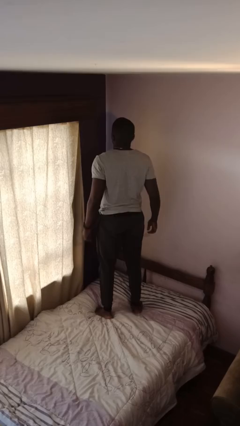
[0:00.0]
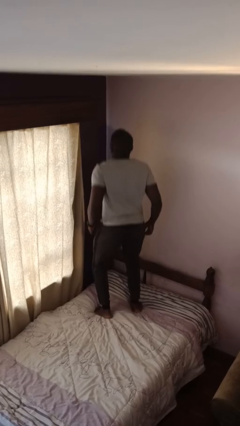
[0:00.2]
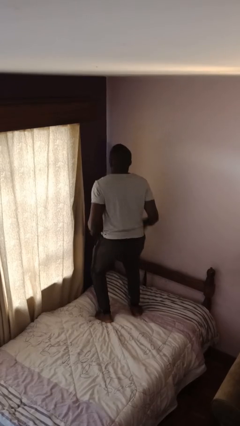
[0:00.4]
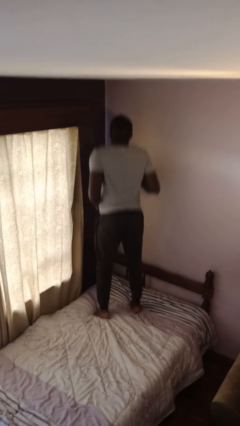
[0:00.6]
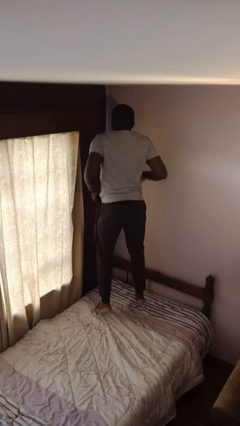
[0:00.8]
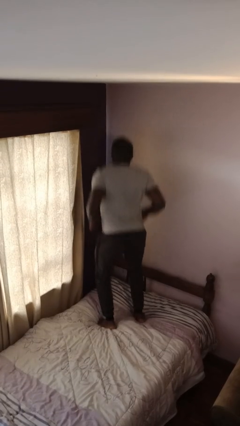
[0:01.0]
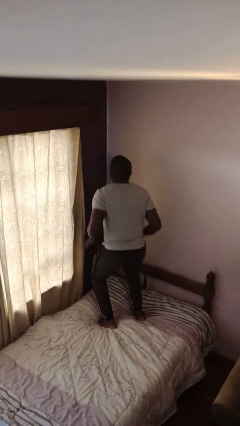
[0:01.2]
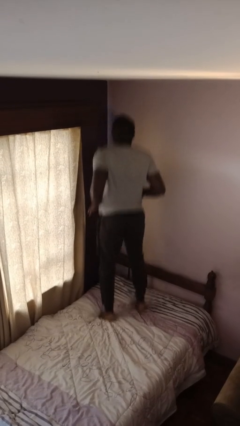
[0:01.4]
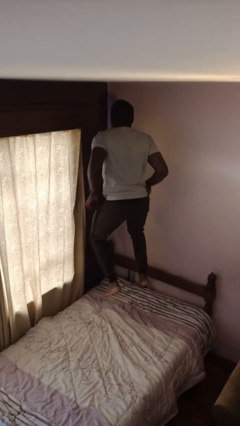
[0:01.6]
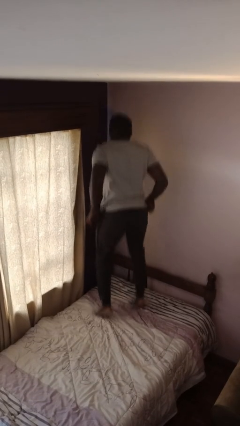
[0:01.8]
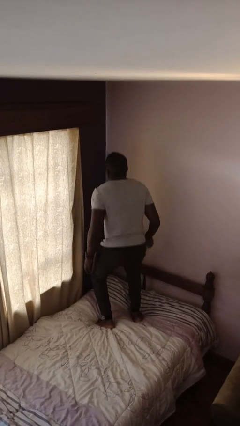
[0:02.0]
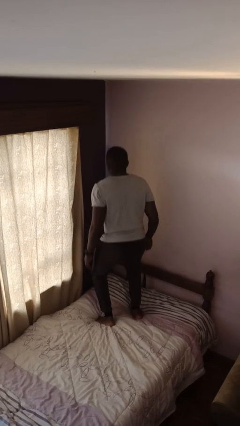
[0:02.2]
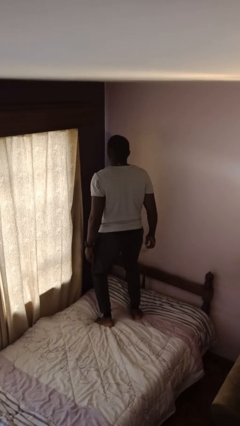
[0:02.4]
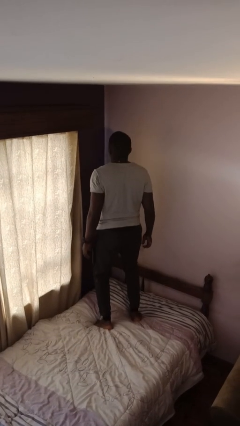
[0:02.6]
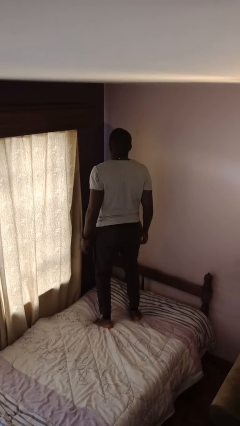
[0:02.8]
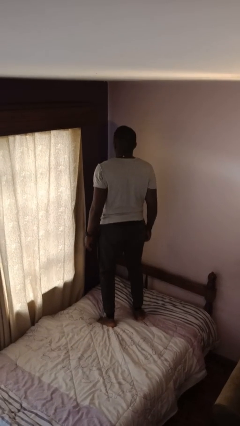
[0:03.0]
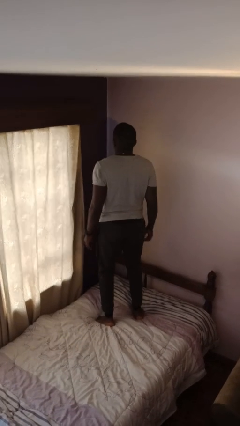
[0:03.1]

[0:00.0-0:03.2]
person jumps on bed

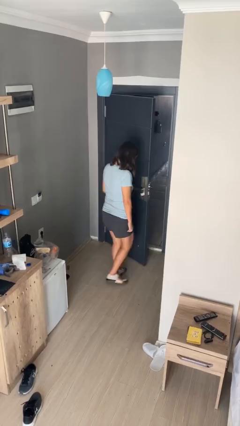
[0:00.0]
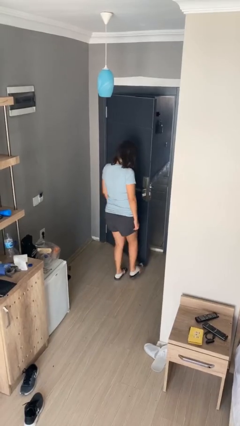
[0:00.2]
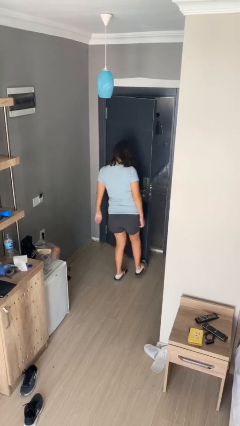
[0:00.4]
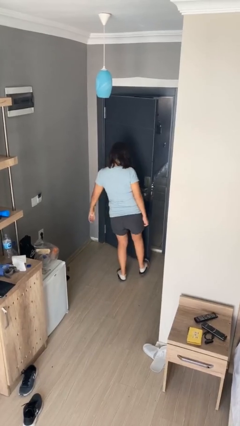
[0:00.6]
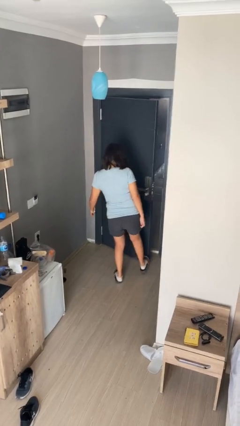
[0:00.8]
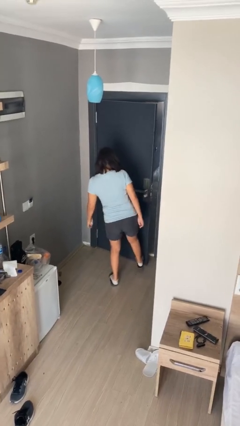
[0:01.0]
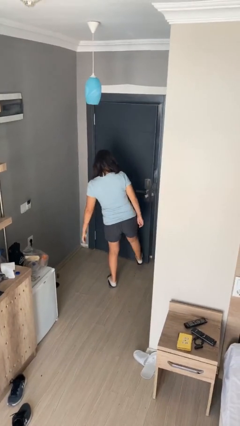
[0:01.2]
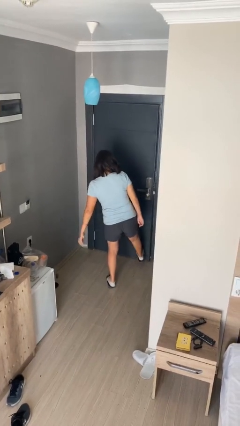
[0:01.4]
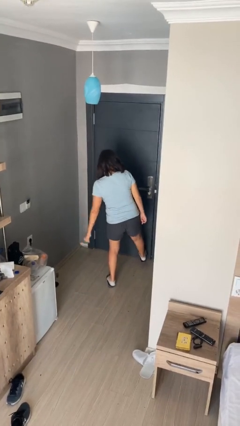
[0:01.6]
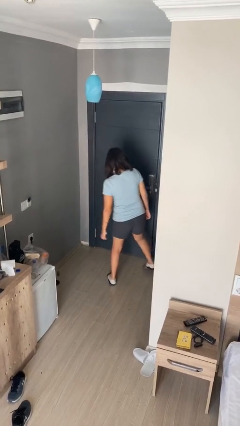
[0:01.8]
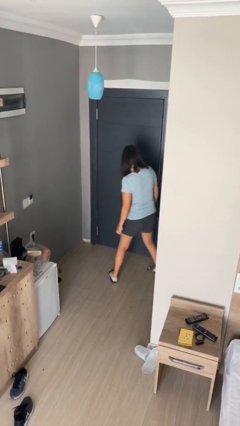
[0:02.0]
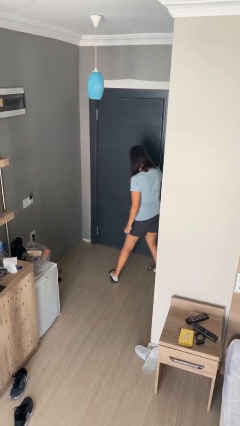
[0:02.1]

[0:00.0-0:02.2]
person closes door with foot

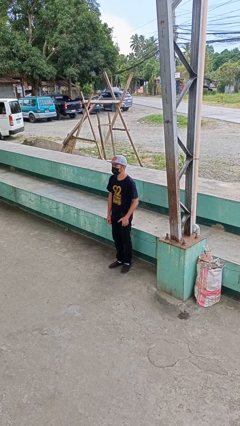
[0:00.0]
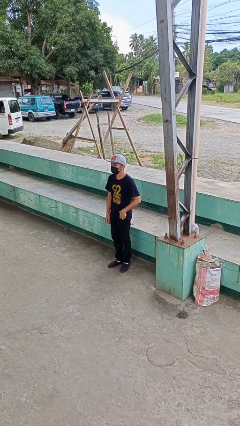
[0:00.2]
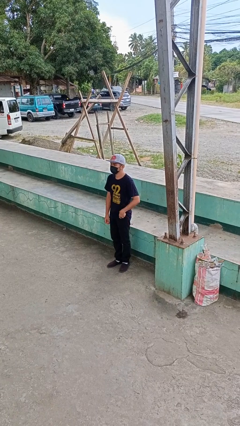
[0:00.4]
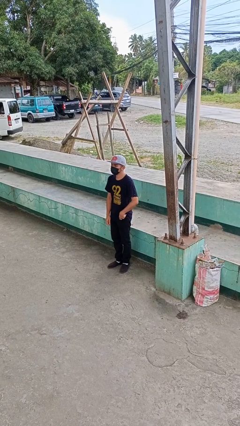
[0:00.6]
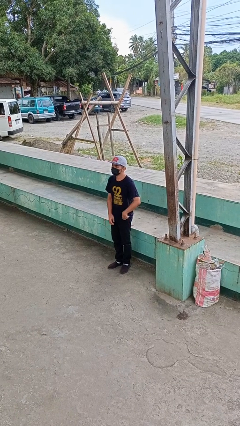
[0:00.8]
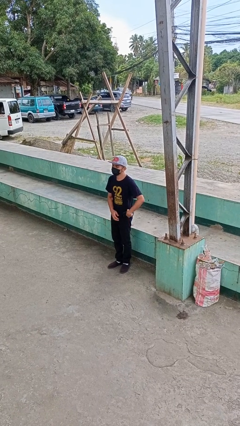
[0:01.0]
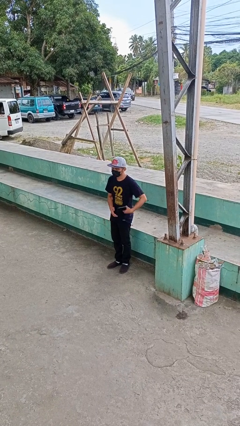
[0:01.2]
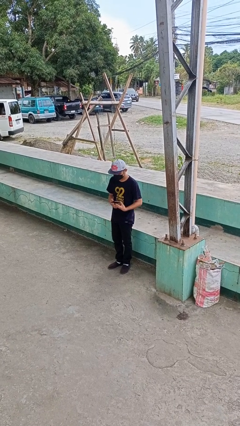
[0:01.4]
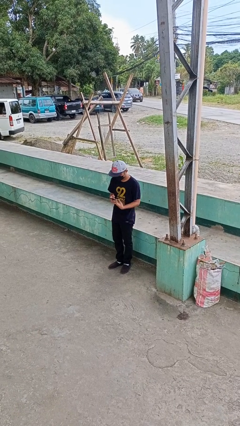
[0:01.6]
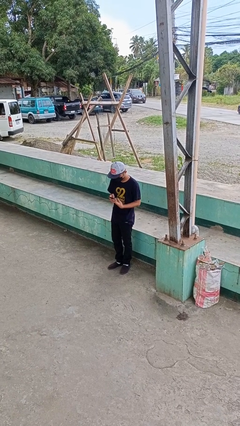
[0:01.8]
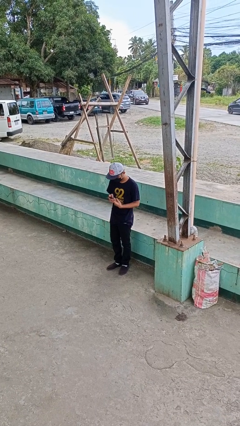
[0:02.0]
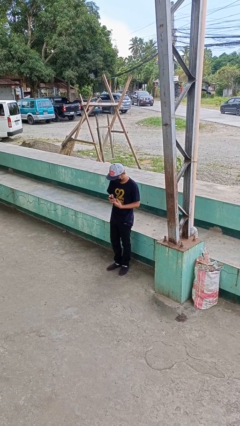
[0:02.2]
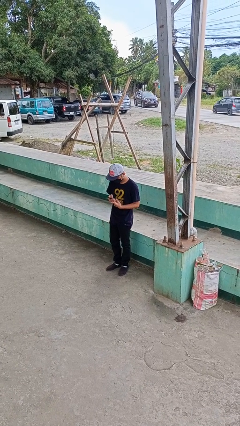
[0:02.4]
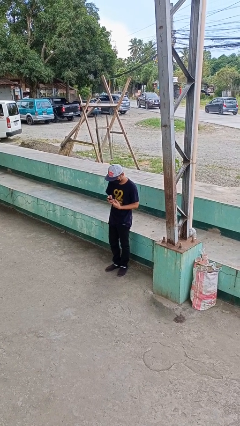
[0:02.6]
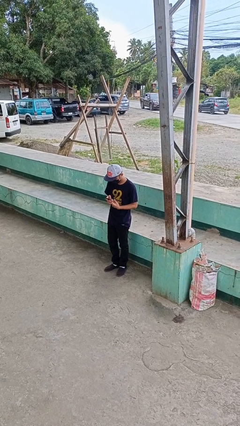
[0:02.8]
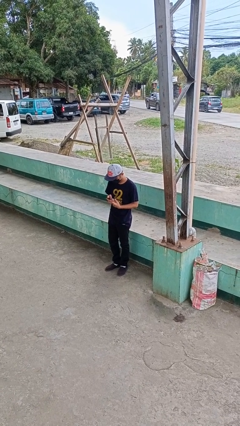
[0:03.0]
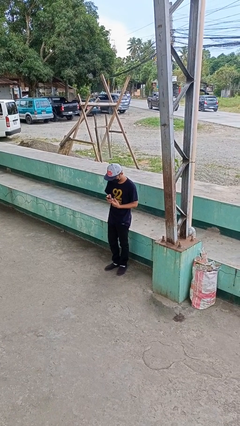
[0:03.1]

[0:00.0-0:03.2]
person takes phone from pocket

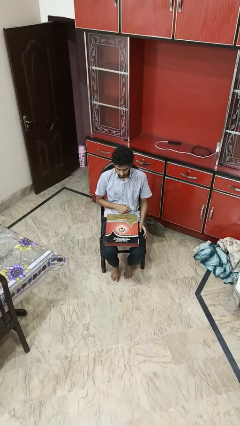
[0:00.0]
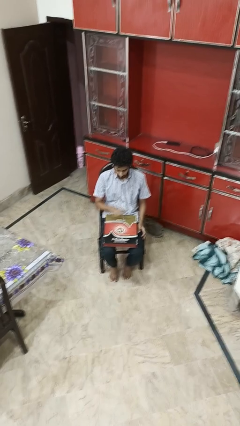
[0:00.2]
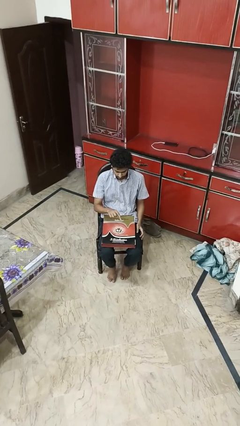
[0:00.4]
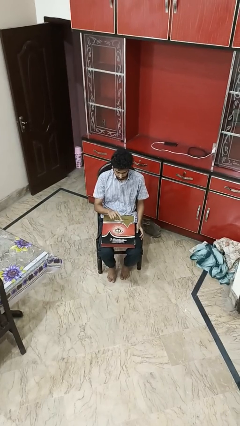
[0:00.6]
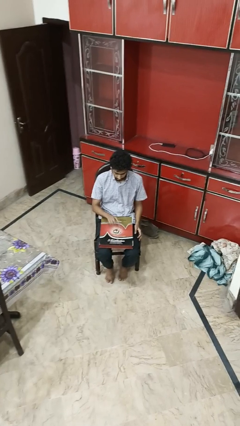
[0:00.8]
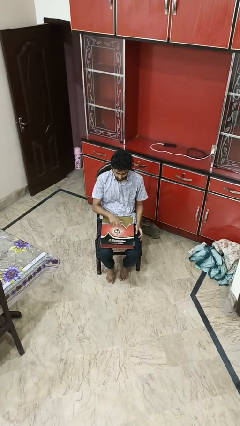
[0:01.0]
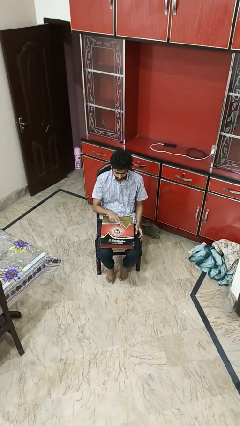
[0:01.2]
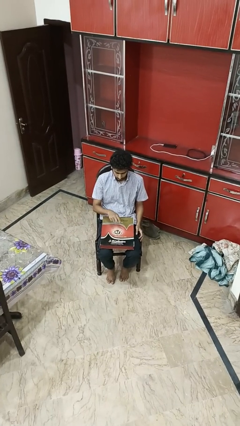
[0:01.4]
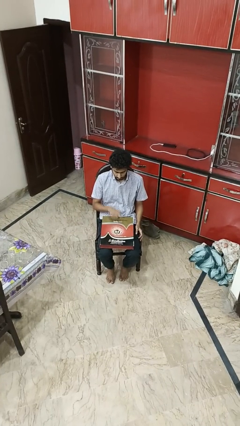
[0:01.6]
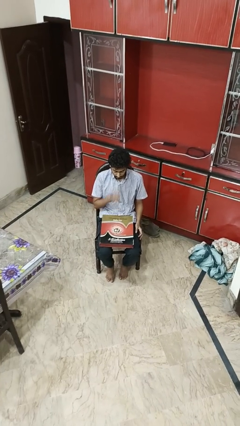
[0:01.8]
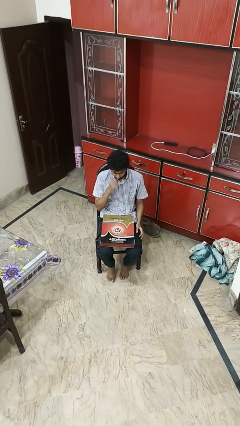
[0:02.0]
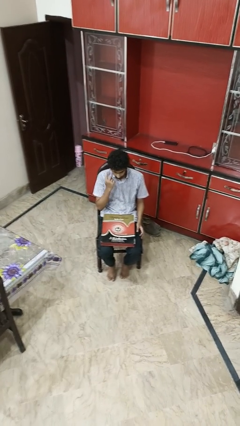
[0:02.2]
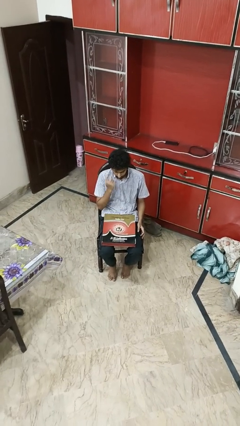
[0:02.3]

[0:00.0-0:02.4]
person taps object with finger

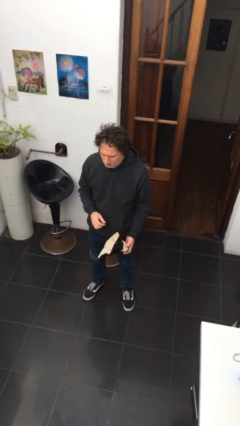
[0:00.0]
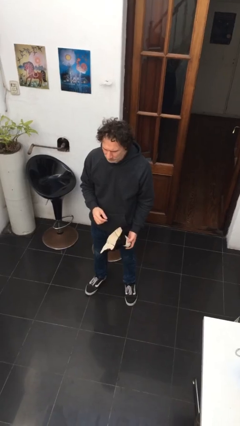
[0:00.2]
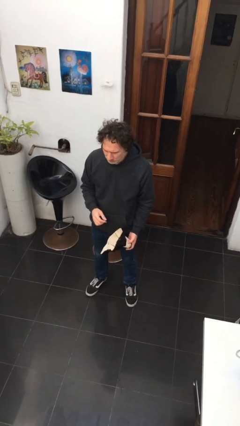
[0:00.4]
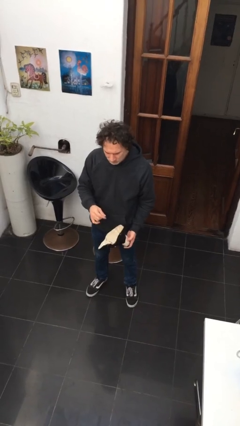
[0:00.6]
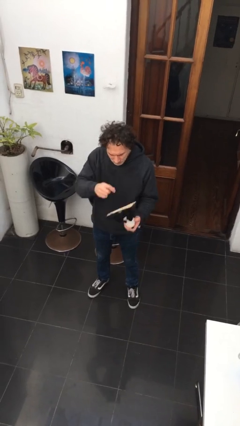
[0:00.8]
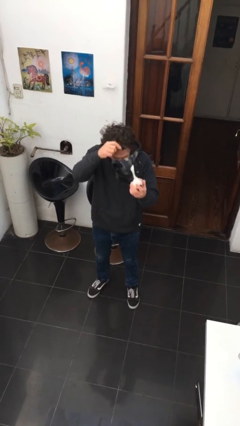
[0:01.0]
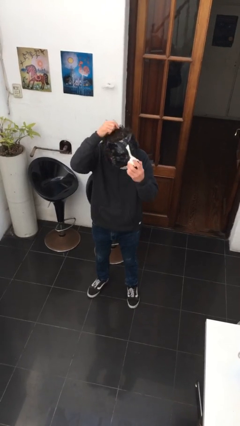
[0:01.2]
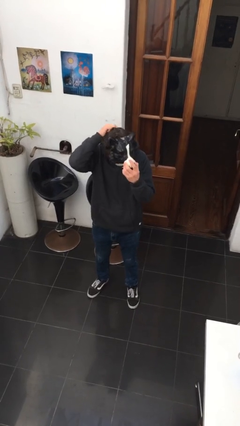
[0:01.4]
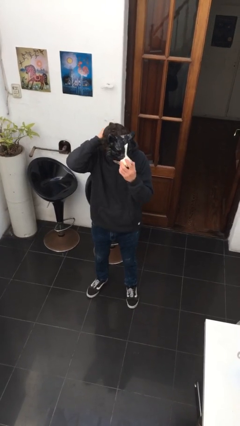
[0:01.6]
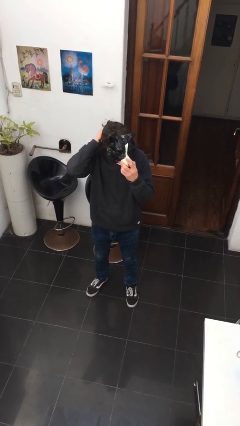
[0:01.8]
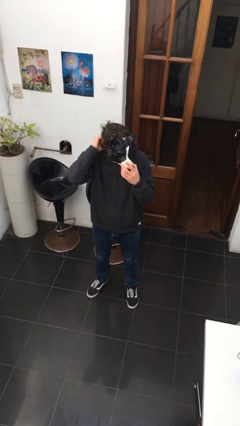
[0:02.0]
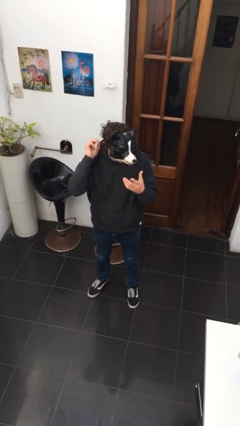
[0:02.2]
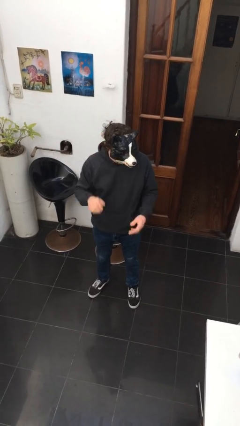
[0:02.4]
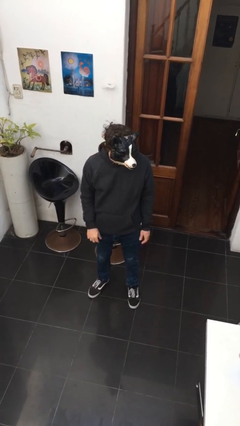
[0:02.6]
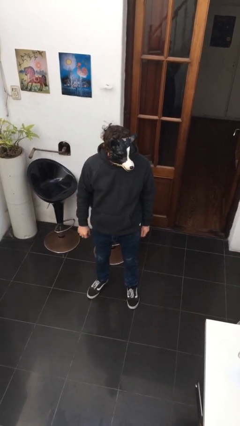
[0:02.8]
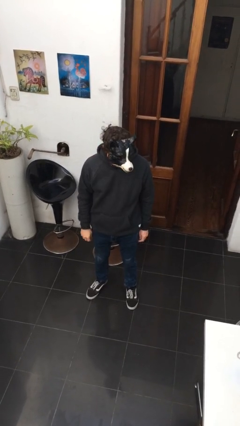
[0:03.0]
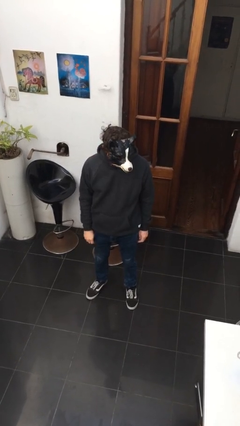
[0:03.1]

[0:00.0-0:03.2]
person puts on facemask

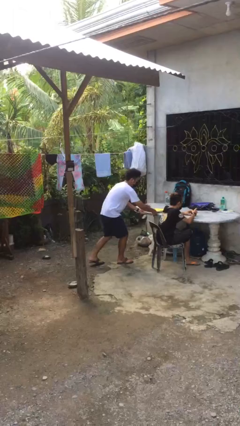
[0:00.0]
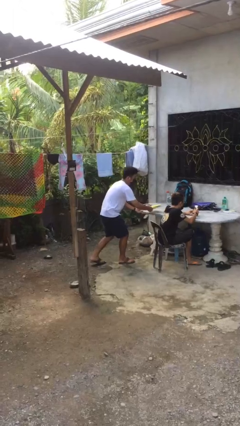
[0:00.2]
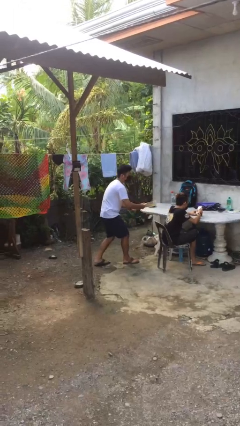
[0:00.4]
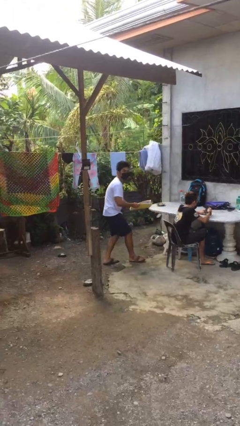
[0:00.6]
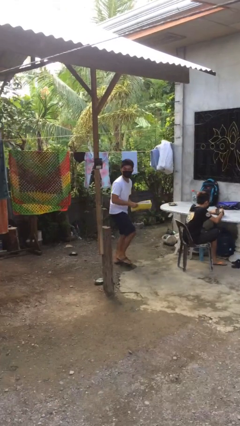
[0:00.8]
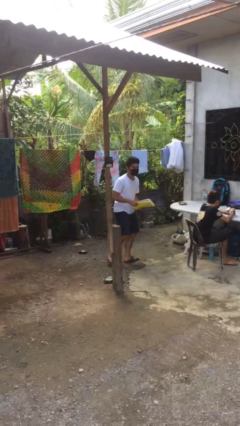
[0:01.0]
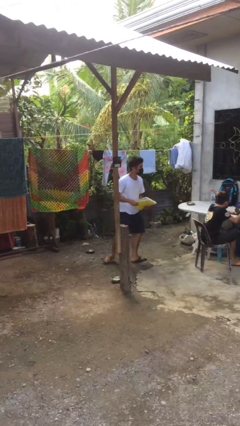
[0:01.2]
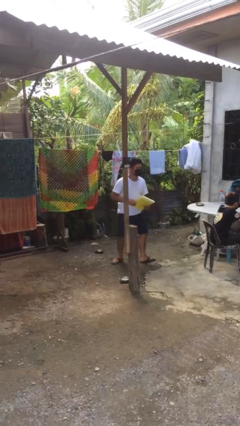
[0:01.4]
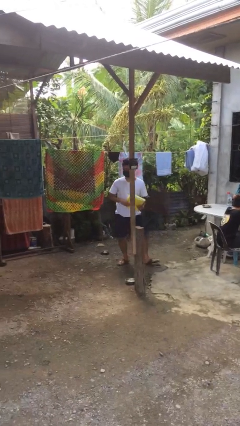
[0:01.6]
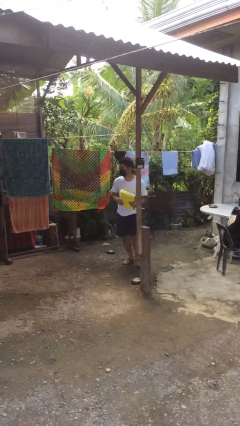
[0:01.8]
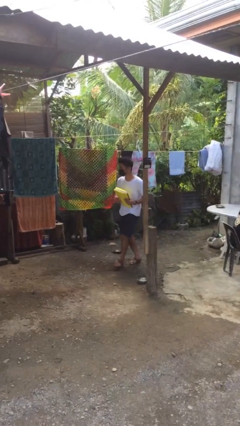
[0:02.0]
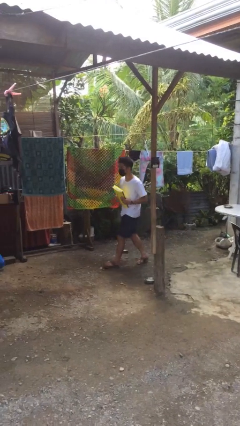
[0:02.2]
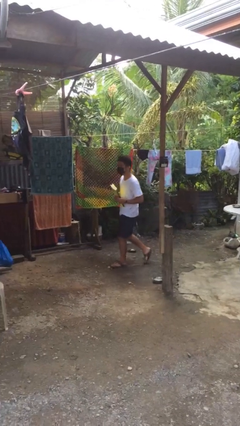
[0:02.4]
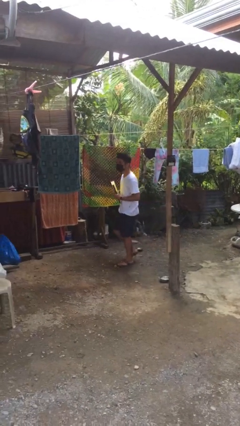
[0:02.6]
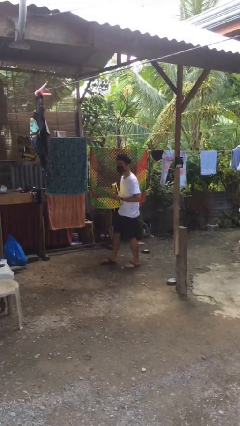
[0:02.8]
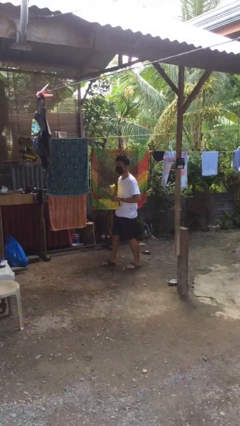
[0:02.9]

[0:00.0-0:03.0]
person steals object from person
